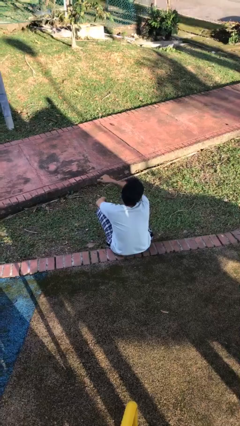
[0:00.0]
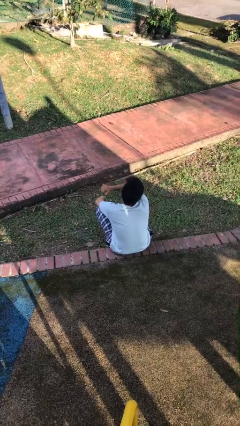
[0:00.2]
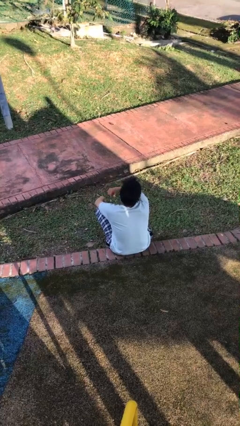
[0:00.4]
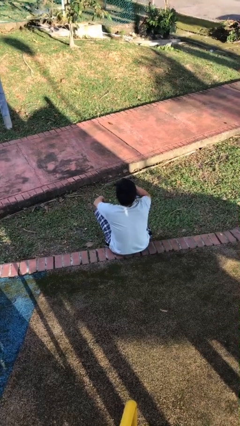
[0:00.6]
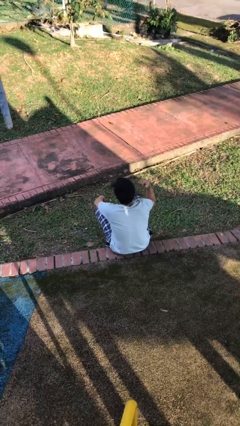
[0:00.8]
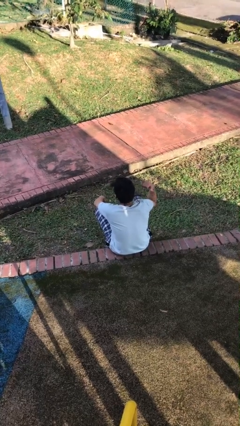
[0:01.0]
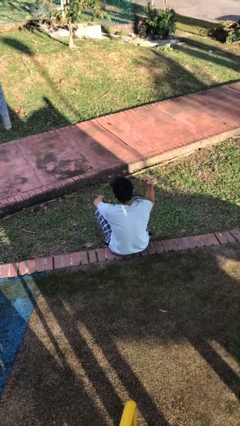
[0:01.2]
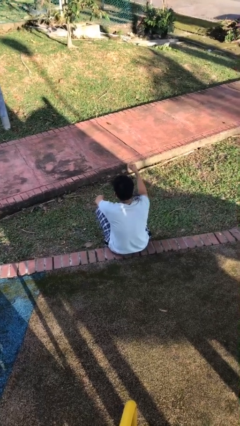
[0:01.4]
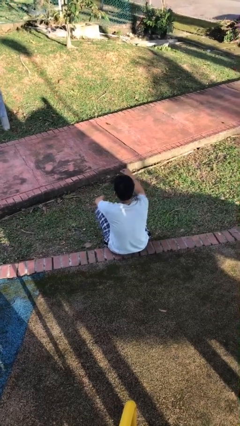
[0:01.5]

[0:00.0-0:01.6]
person gestures cut

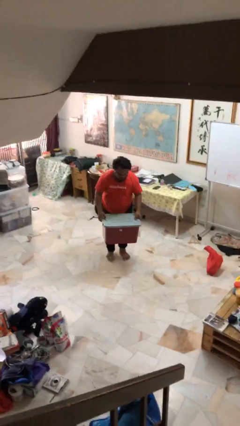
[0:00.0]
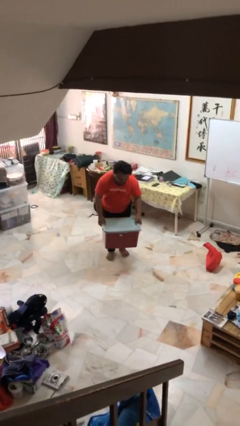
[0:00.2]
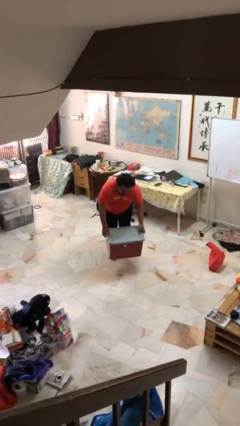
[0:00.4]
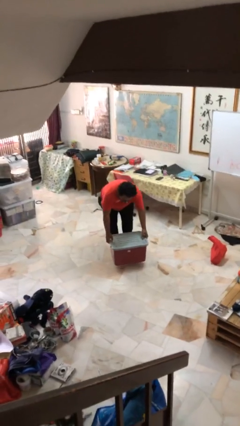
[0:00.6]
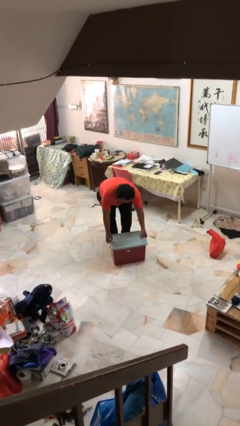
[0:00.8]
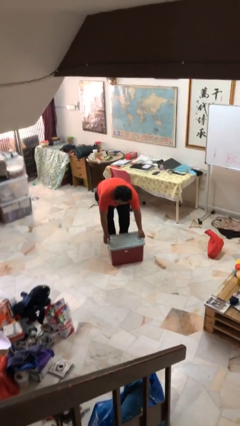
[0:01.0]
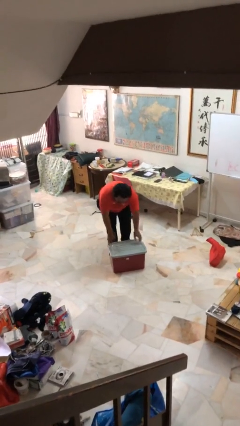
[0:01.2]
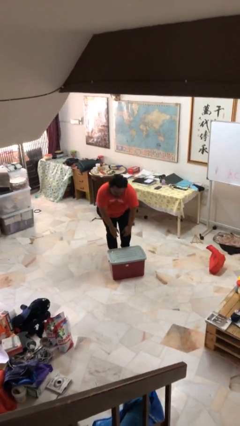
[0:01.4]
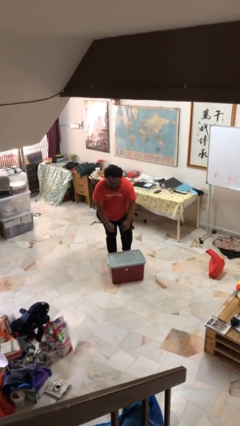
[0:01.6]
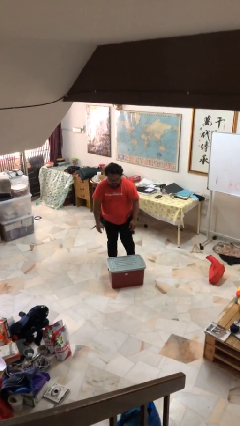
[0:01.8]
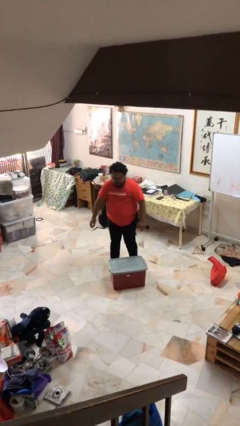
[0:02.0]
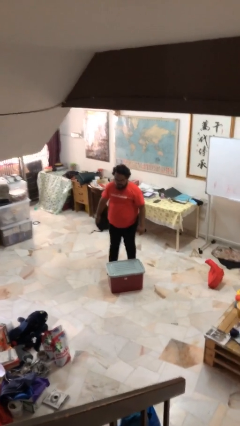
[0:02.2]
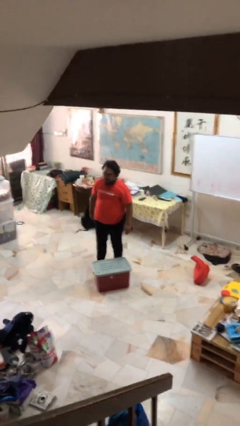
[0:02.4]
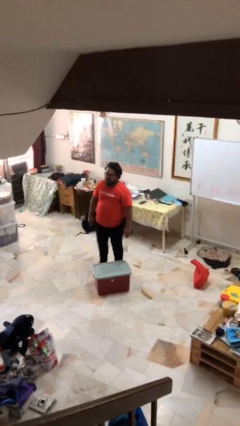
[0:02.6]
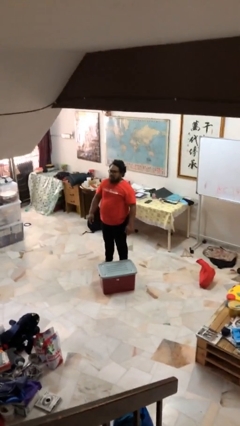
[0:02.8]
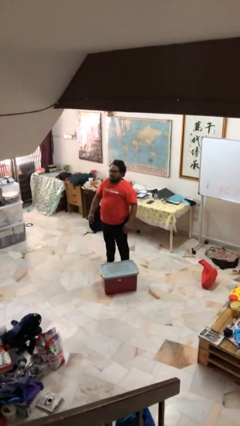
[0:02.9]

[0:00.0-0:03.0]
person puts down object on floor

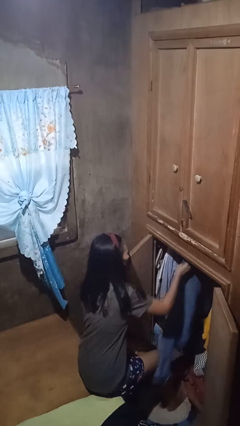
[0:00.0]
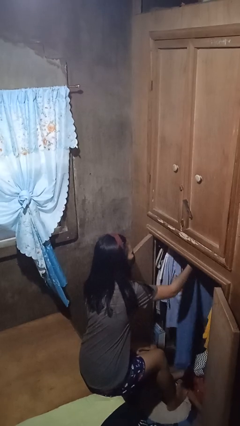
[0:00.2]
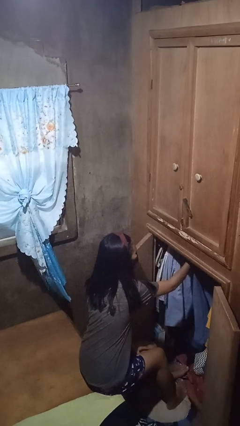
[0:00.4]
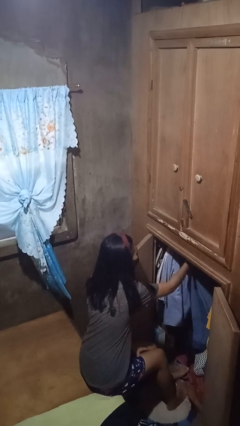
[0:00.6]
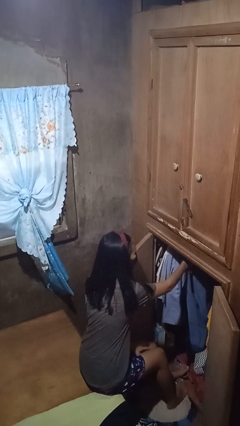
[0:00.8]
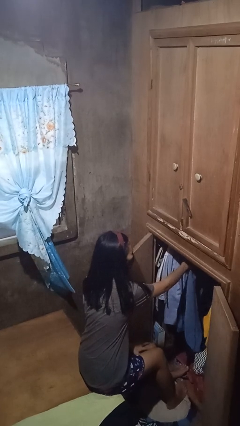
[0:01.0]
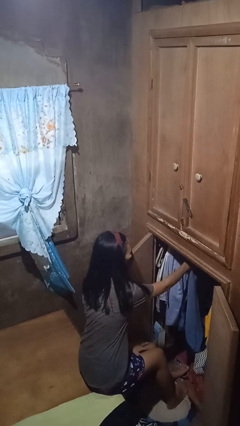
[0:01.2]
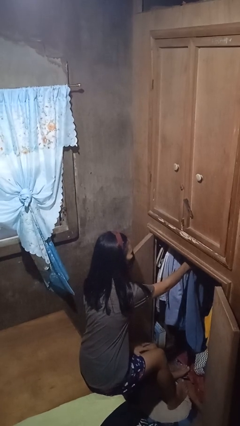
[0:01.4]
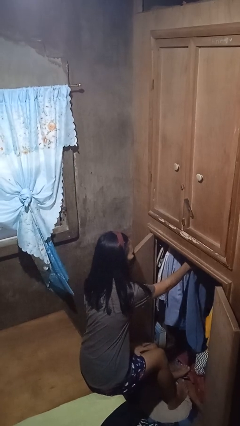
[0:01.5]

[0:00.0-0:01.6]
person puts clothes into closet

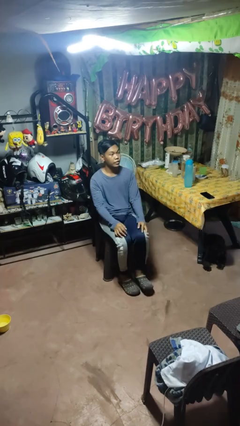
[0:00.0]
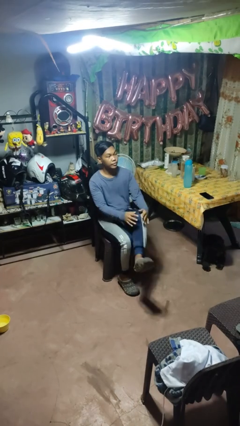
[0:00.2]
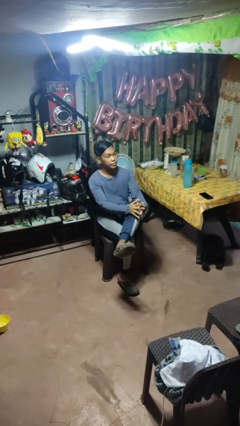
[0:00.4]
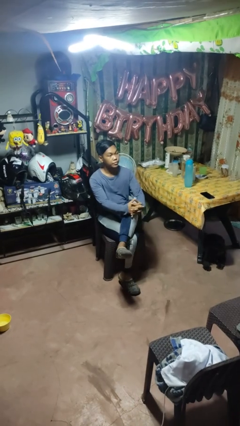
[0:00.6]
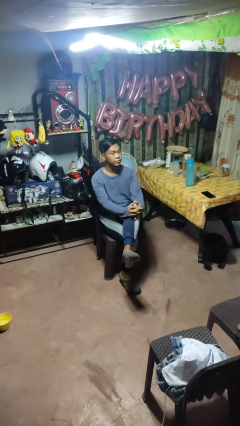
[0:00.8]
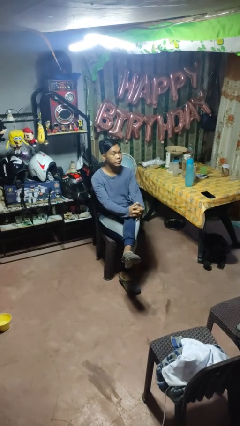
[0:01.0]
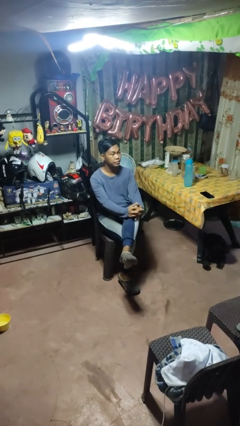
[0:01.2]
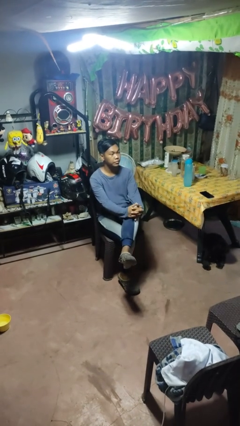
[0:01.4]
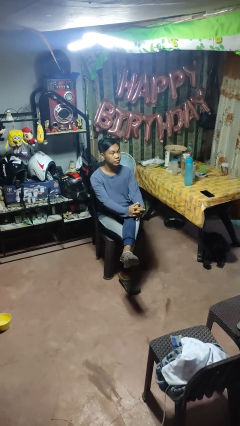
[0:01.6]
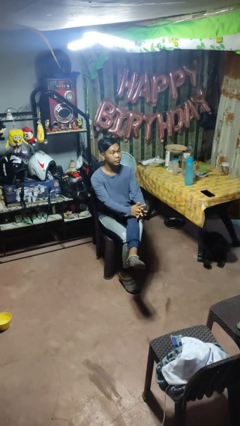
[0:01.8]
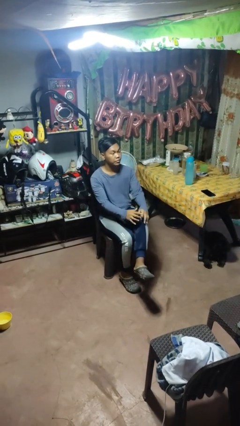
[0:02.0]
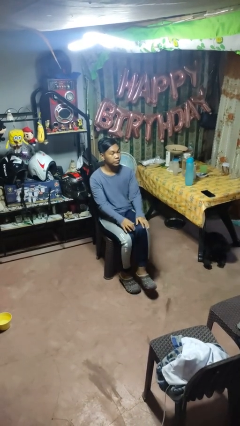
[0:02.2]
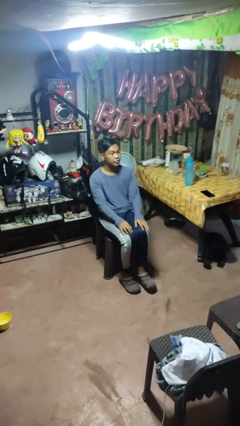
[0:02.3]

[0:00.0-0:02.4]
person crosses legs

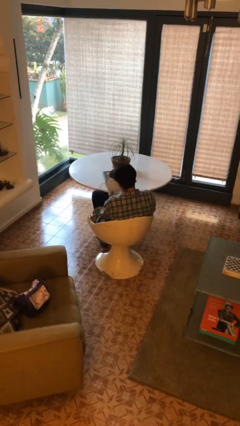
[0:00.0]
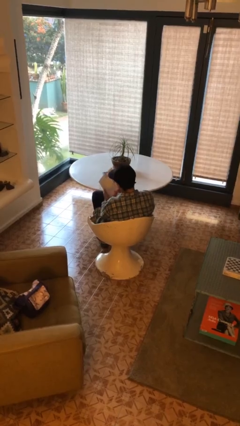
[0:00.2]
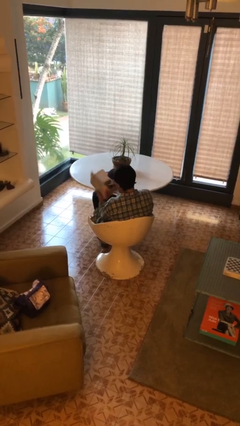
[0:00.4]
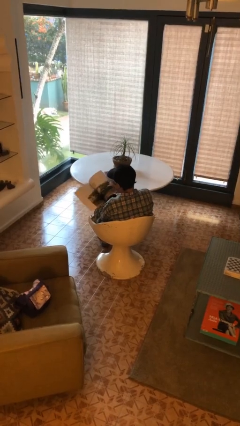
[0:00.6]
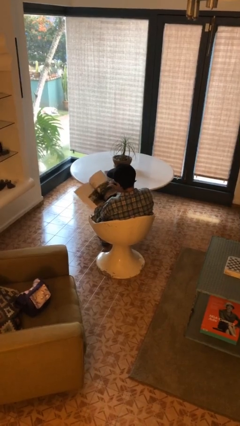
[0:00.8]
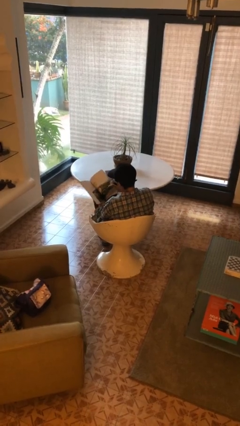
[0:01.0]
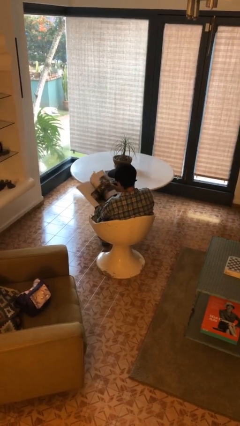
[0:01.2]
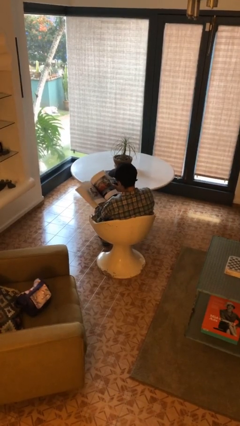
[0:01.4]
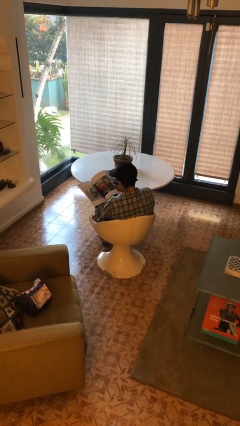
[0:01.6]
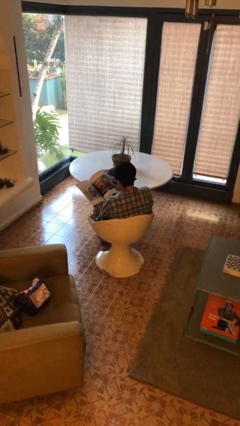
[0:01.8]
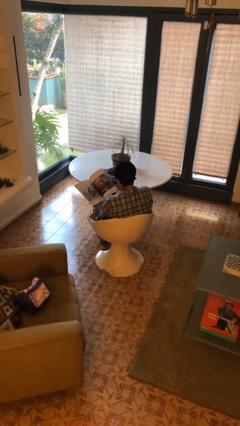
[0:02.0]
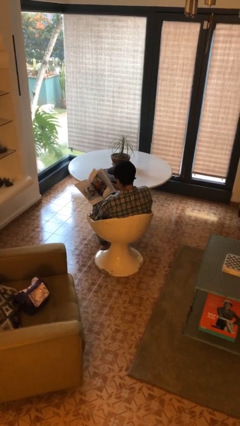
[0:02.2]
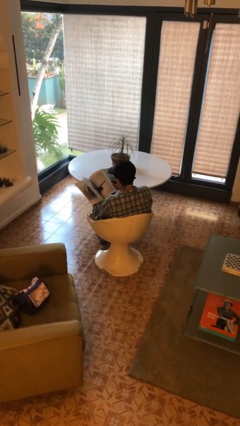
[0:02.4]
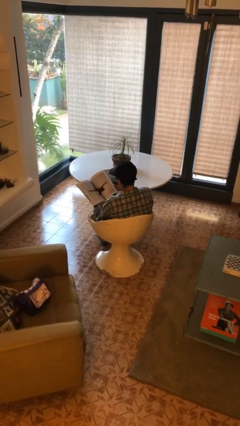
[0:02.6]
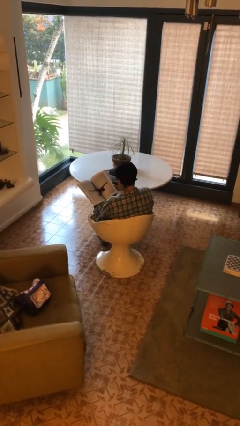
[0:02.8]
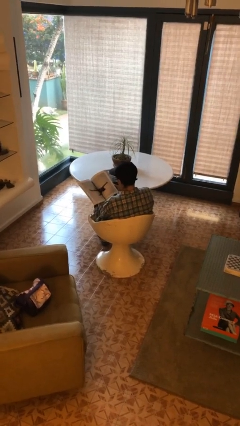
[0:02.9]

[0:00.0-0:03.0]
person reads magazine

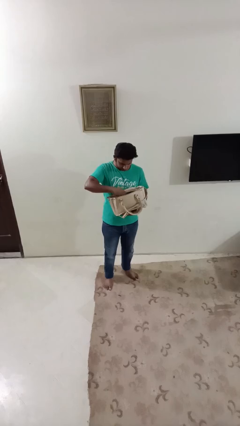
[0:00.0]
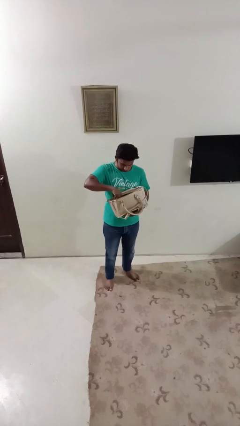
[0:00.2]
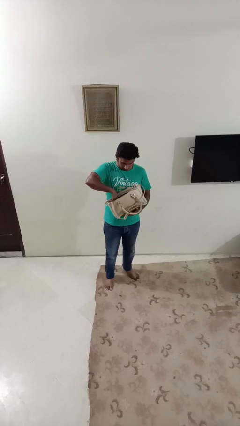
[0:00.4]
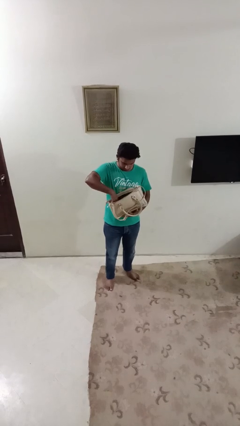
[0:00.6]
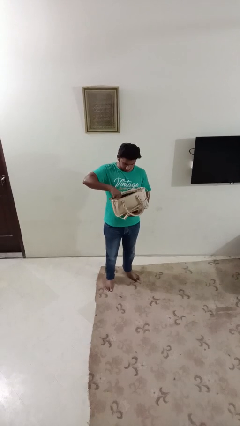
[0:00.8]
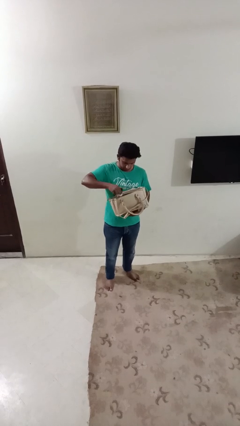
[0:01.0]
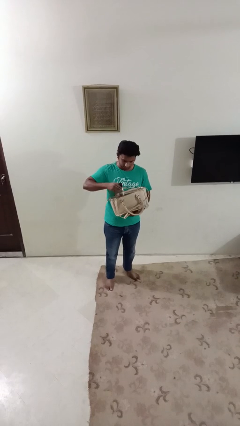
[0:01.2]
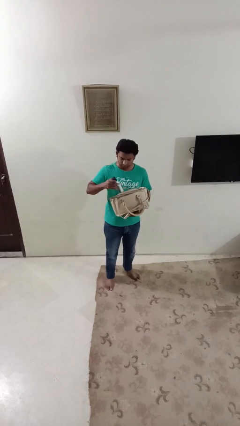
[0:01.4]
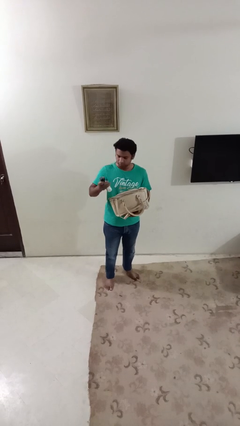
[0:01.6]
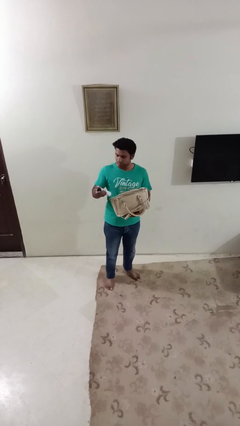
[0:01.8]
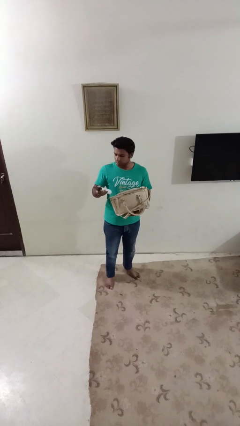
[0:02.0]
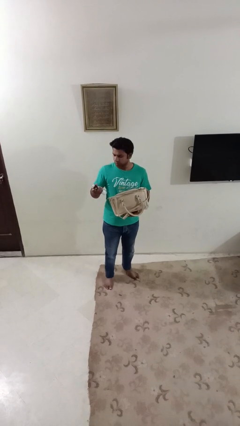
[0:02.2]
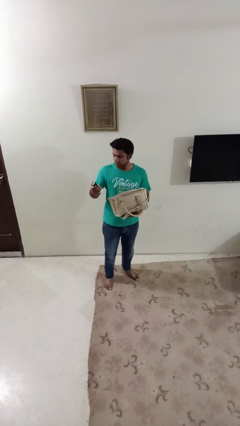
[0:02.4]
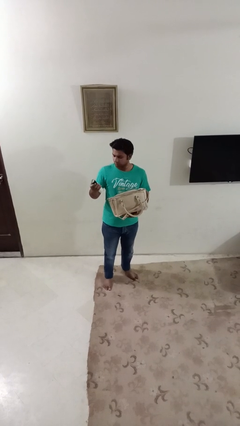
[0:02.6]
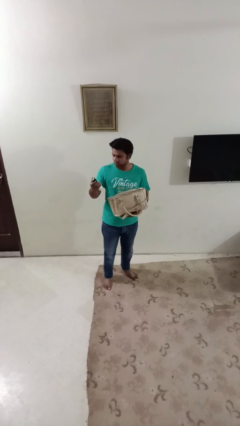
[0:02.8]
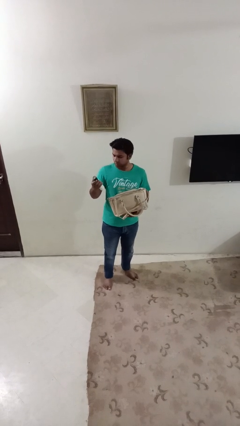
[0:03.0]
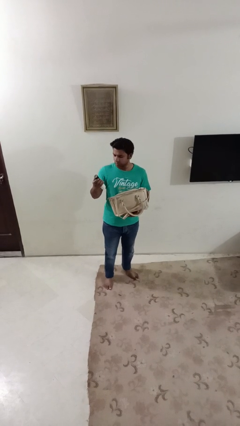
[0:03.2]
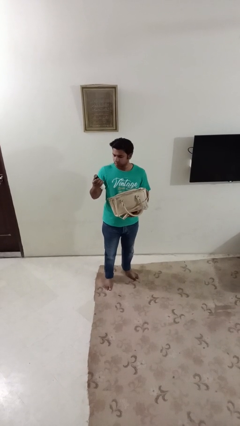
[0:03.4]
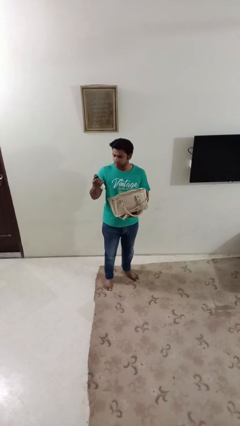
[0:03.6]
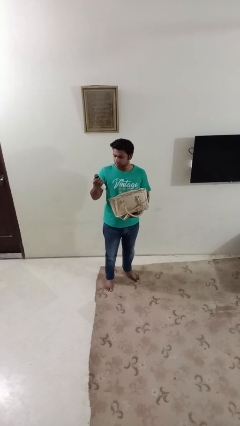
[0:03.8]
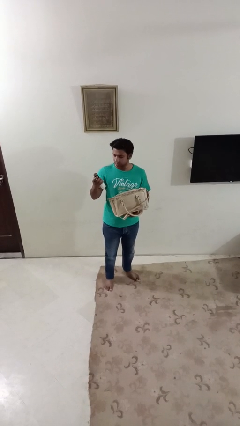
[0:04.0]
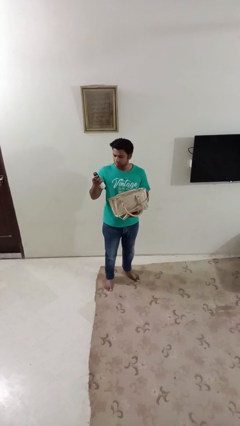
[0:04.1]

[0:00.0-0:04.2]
person takes object from purse

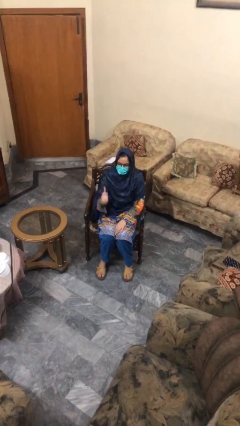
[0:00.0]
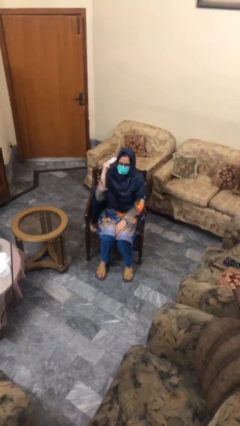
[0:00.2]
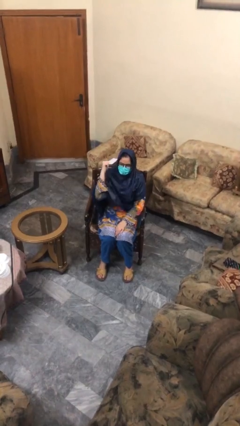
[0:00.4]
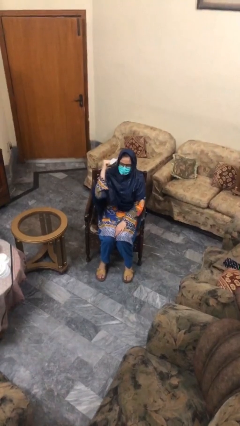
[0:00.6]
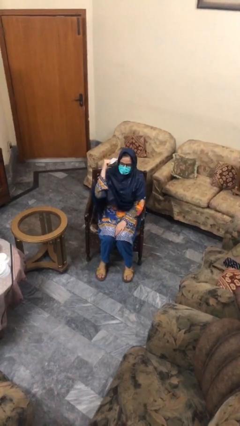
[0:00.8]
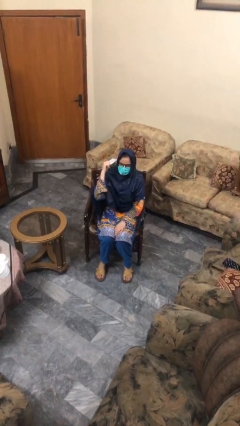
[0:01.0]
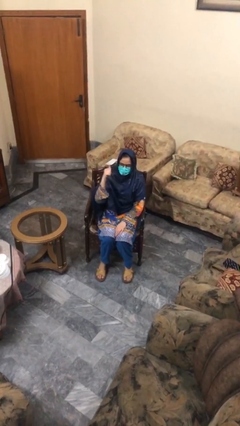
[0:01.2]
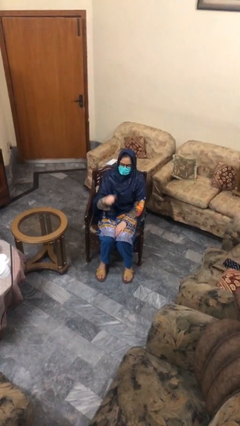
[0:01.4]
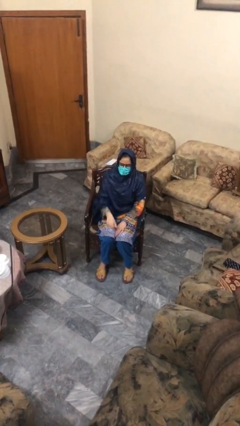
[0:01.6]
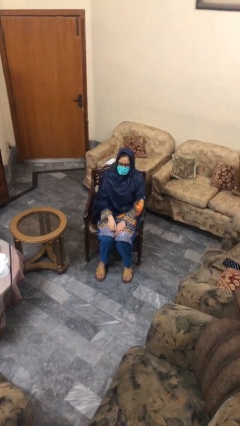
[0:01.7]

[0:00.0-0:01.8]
person gestures behind me
